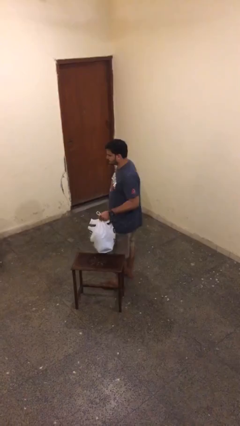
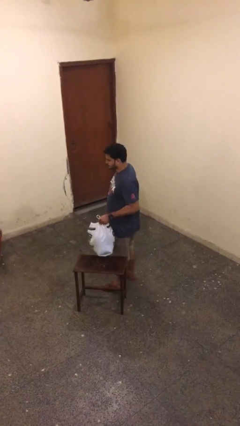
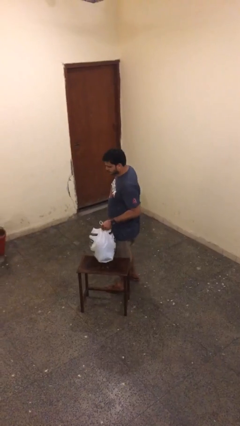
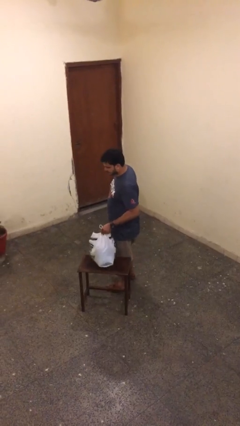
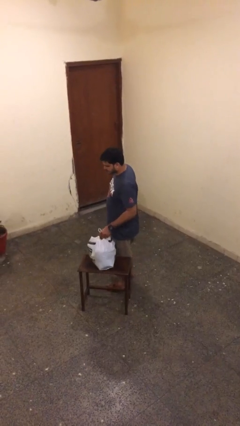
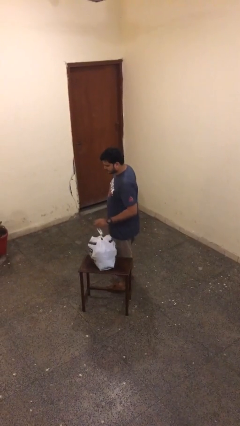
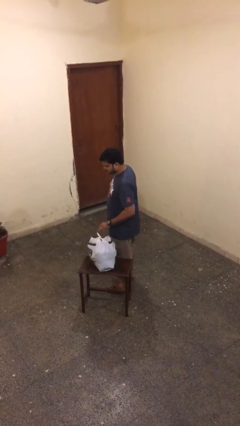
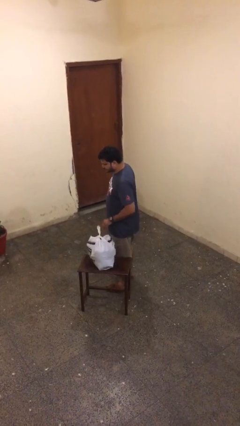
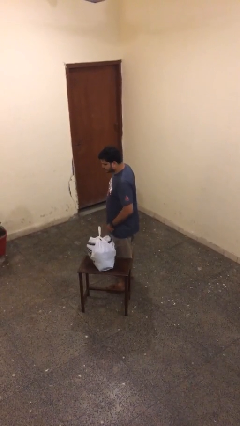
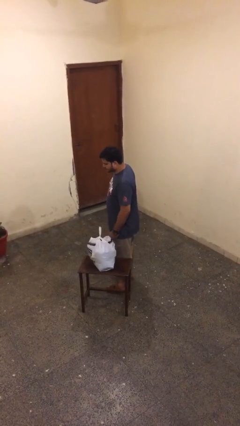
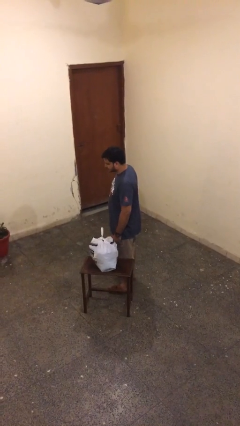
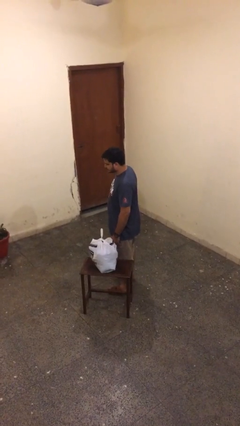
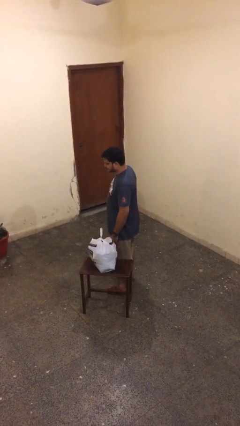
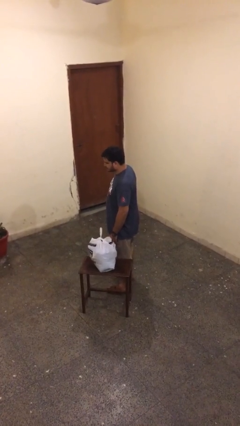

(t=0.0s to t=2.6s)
person puts down object on table

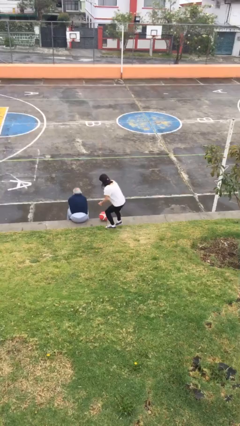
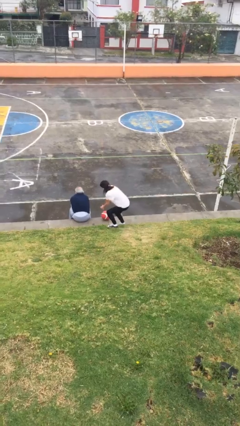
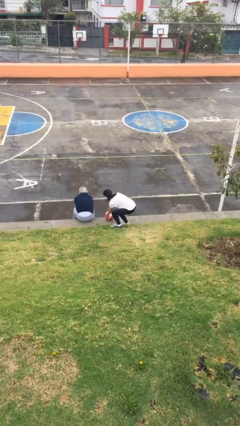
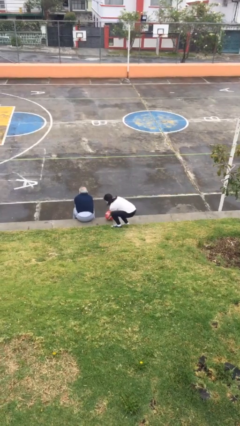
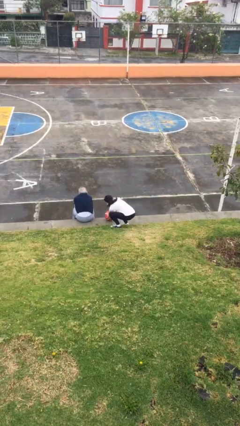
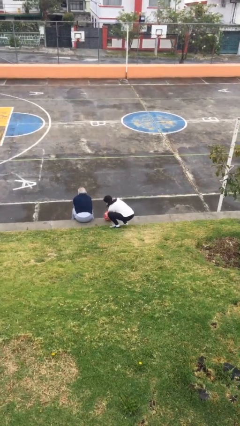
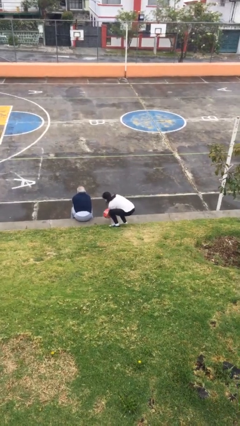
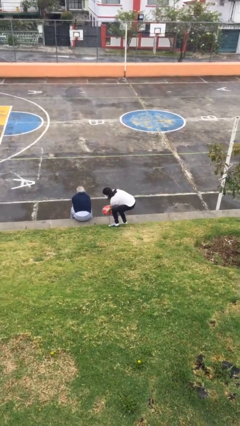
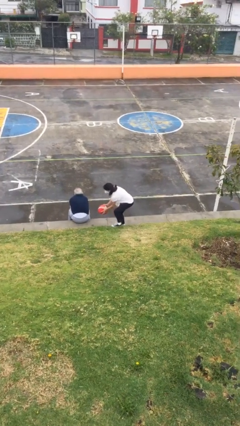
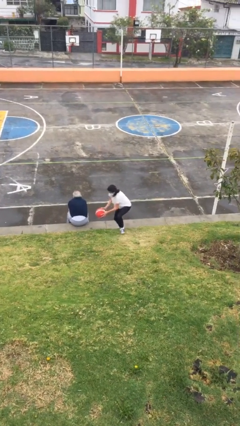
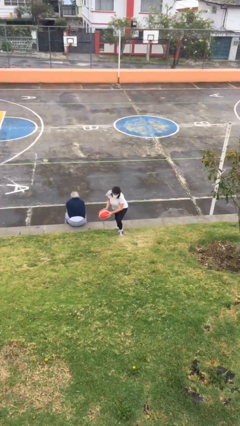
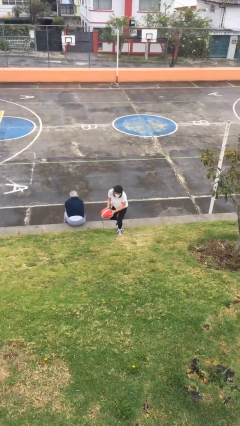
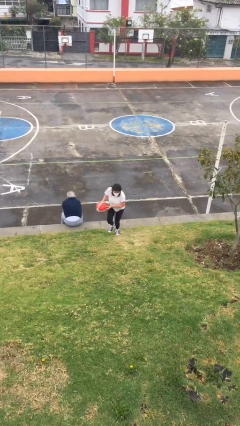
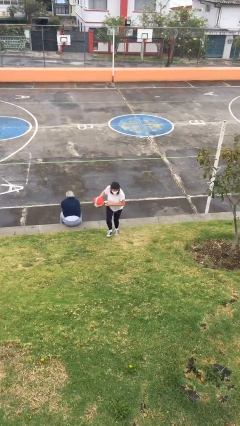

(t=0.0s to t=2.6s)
person steals object from person

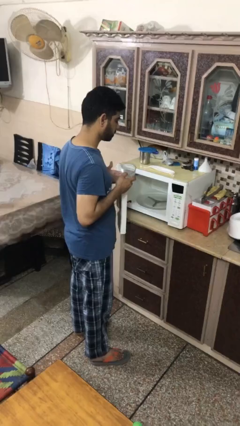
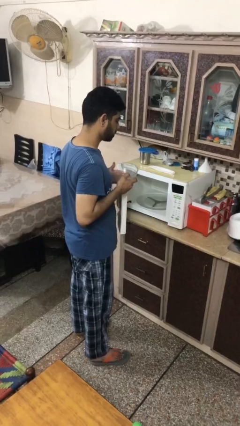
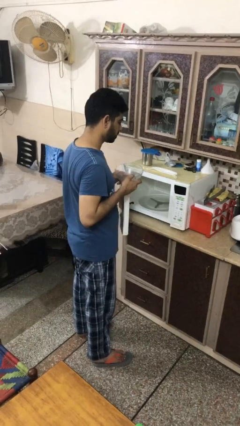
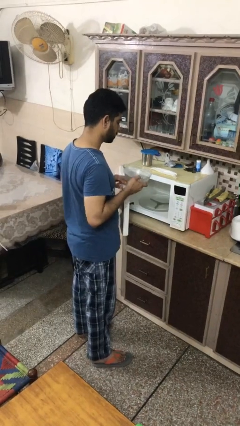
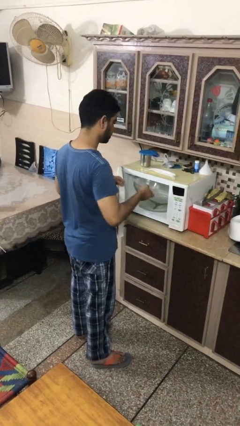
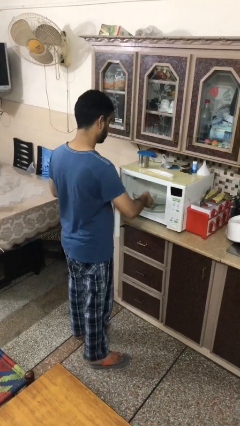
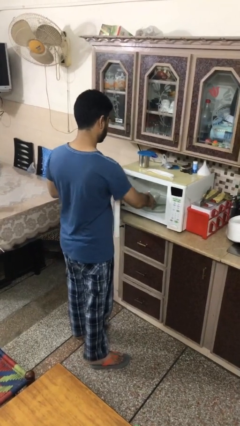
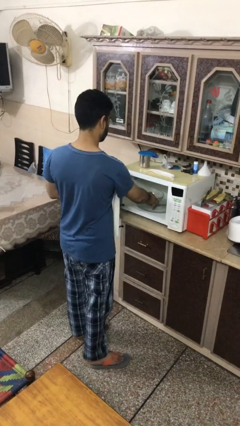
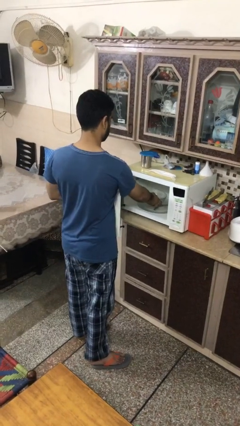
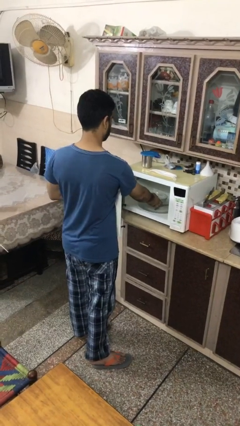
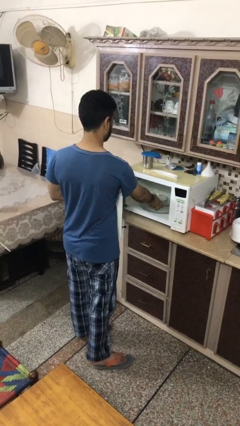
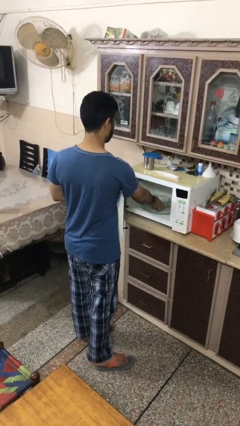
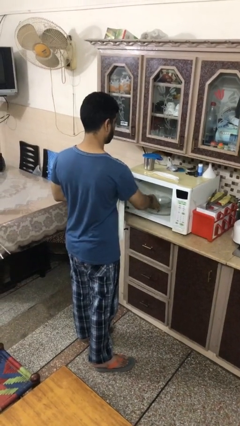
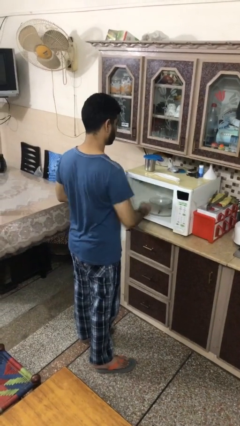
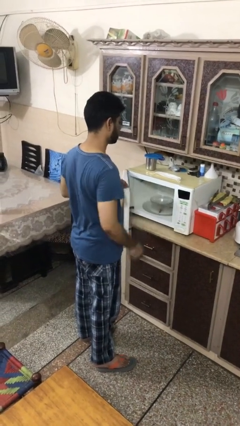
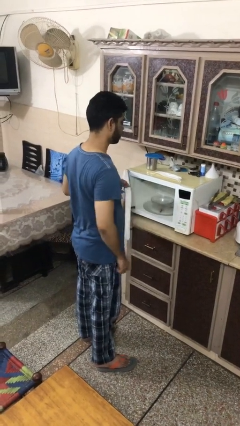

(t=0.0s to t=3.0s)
person puts object into microwave

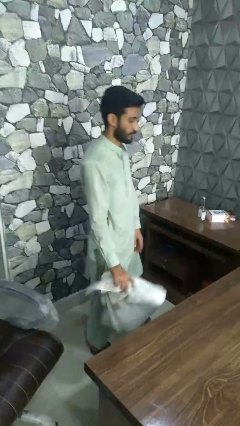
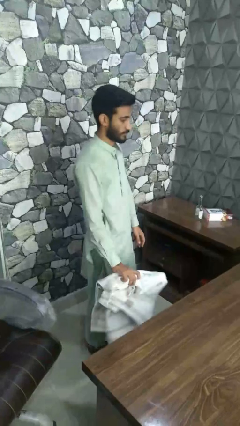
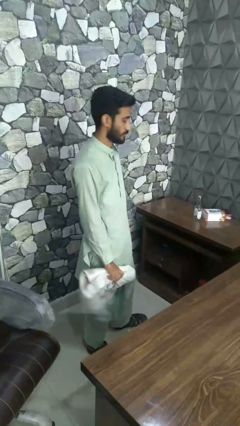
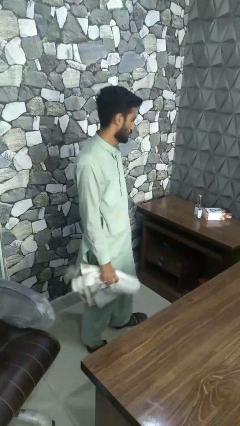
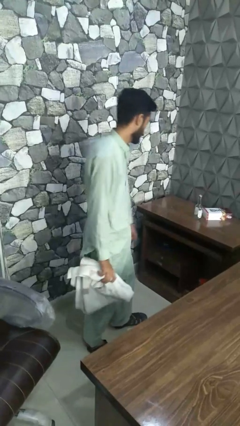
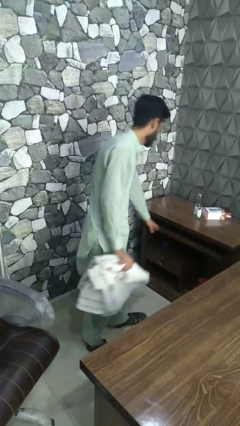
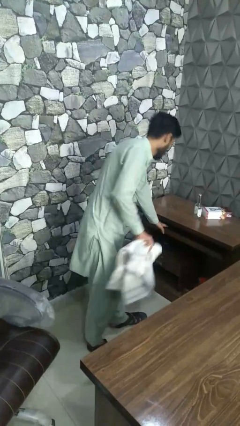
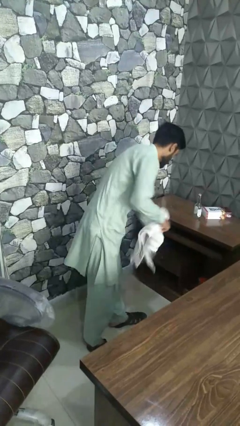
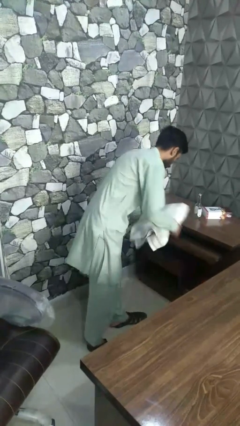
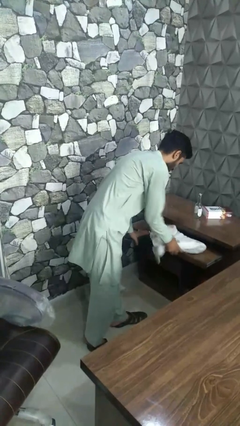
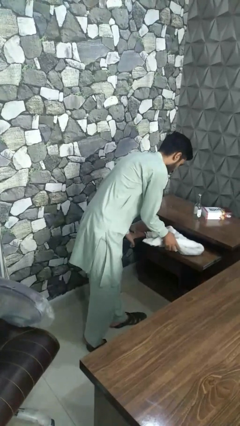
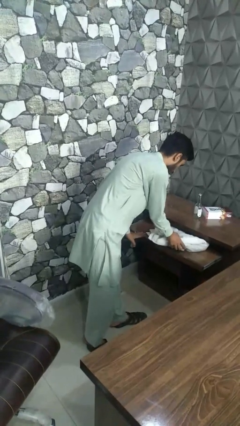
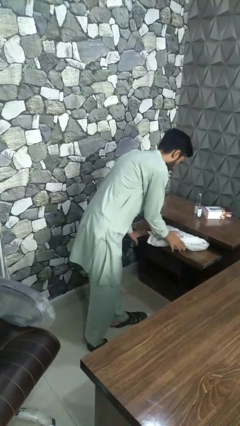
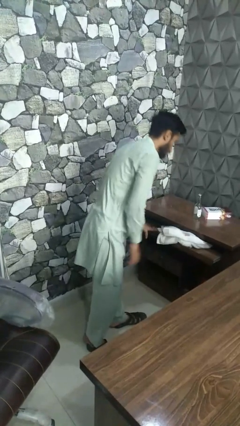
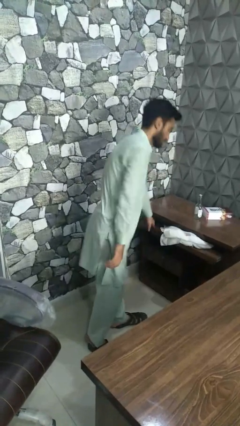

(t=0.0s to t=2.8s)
person puts clothes into dresser

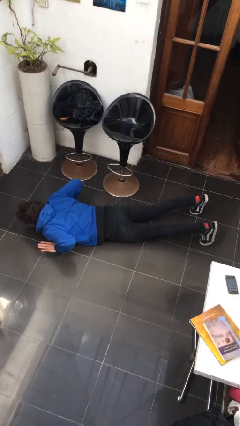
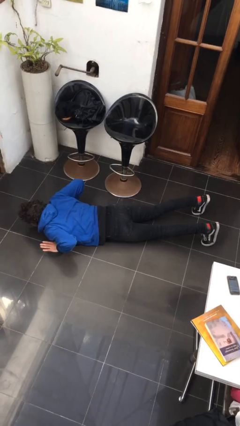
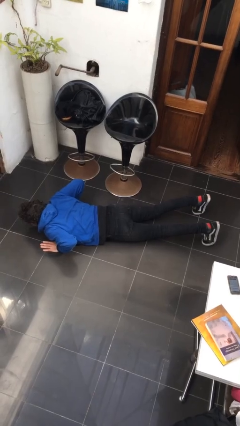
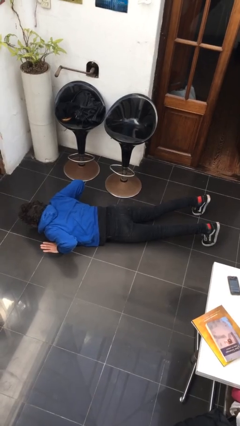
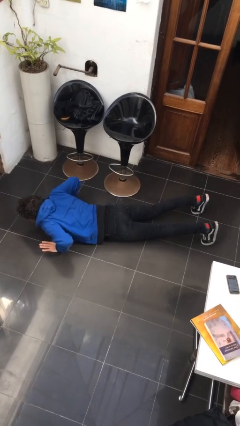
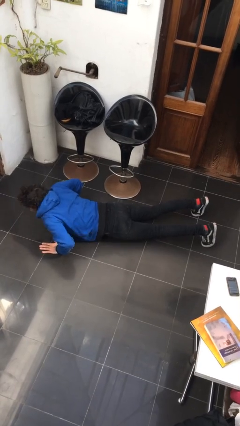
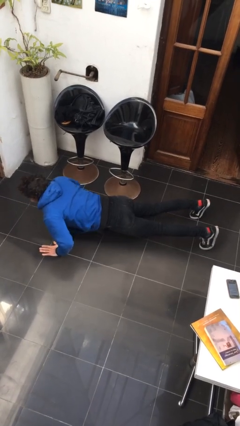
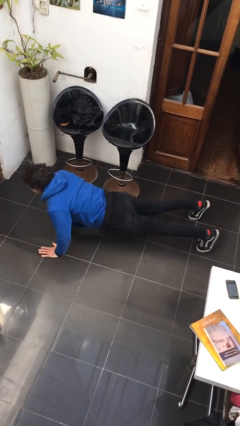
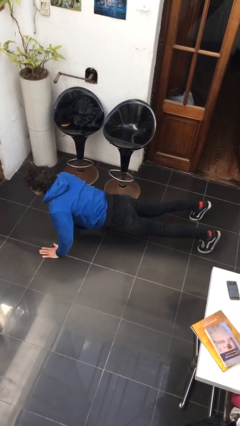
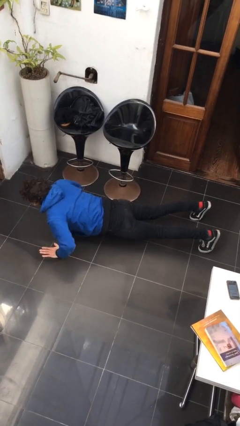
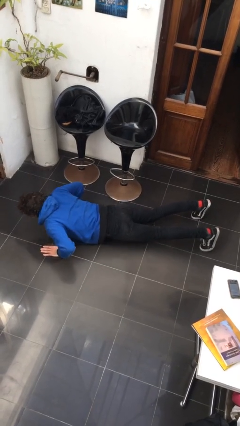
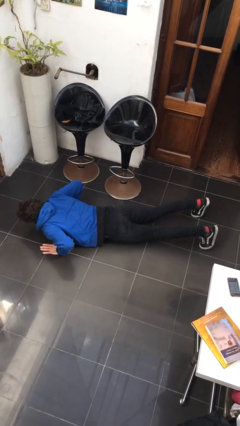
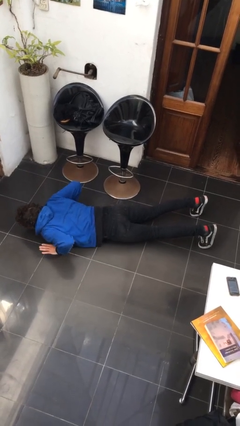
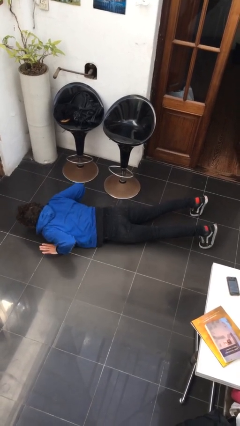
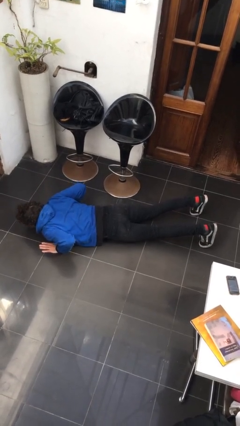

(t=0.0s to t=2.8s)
person exercises with pushup

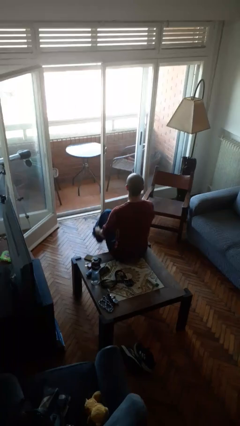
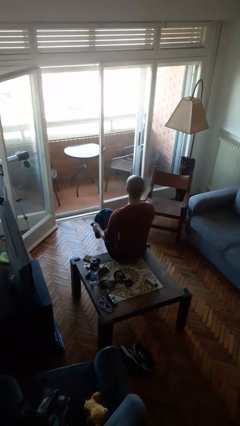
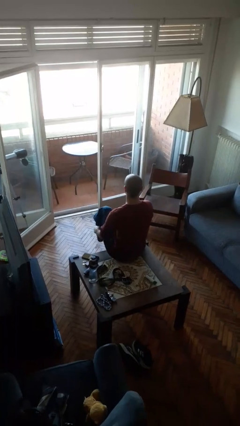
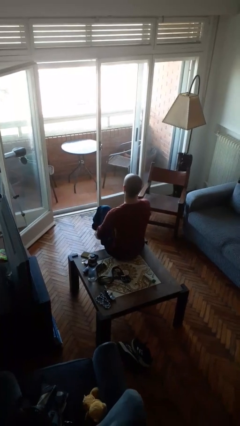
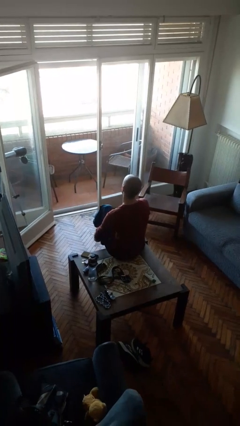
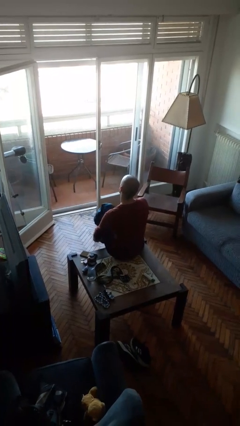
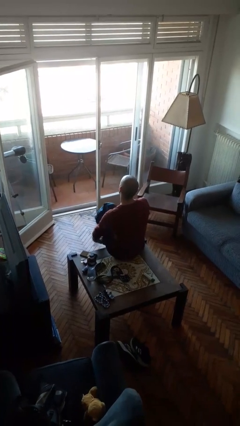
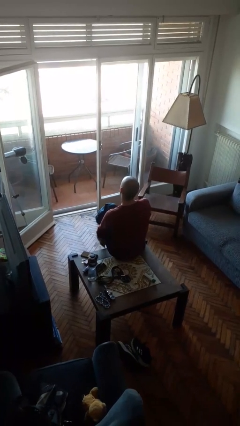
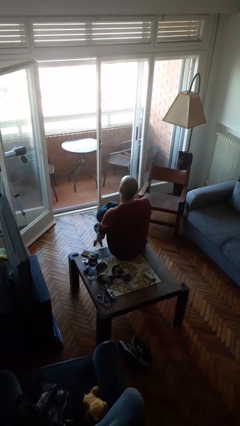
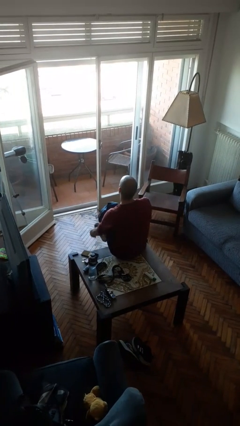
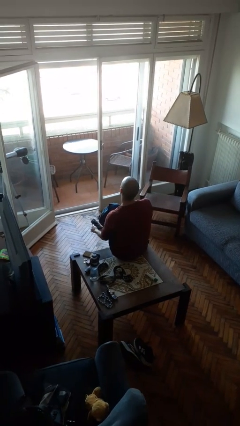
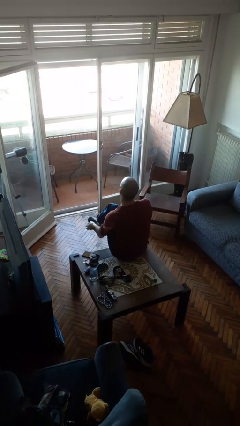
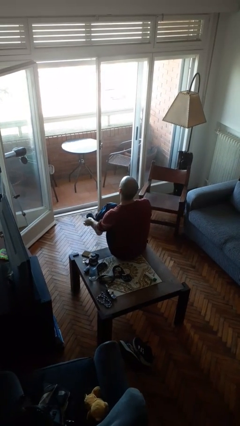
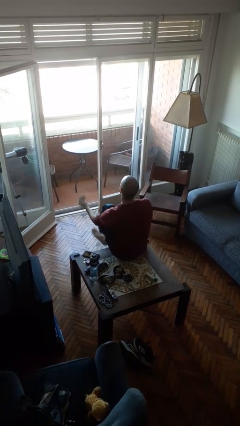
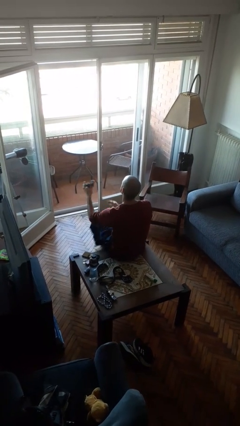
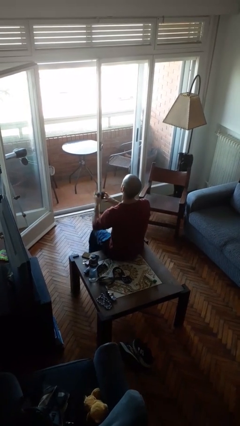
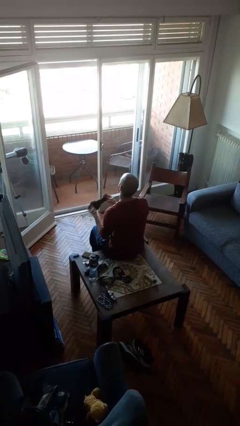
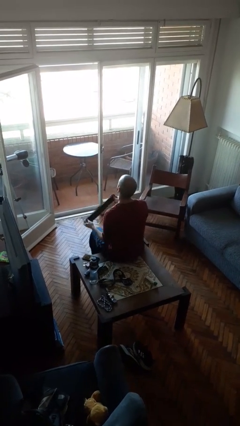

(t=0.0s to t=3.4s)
person takes off socks
